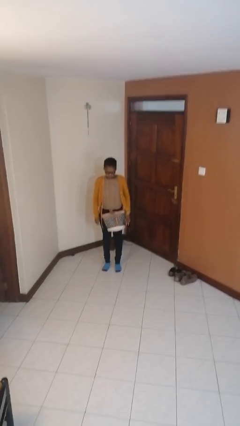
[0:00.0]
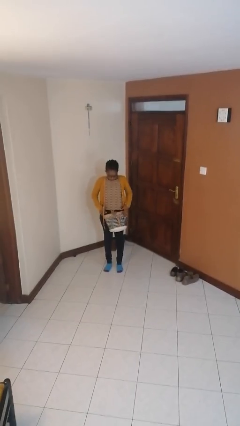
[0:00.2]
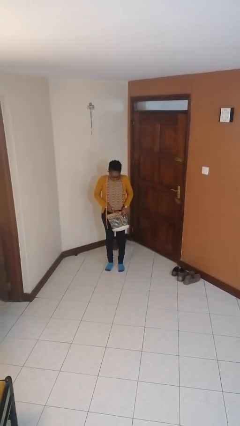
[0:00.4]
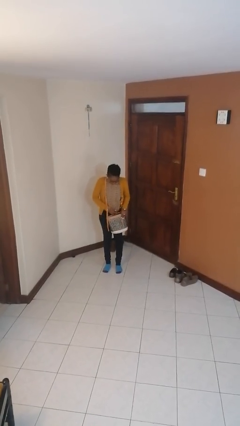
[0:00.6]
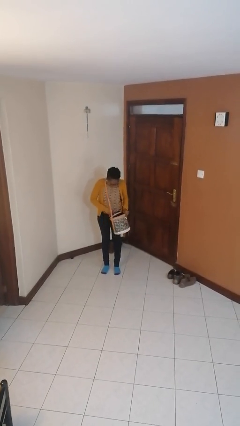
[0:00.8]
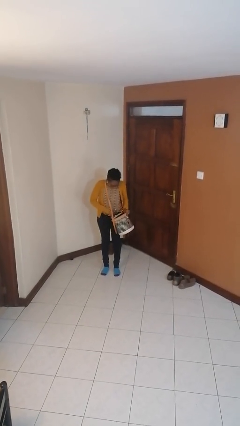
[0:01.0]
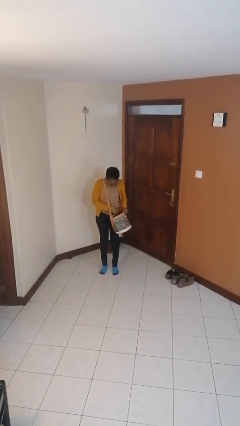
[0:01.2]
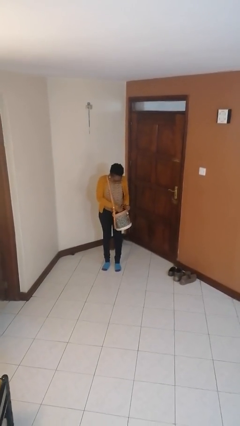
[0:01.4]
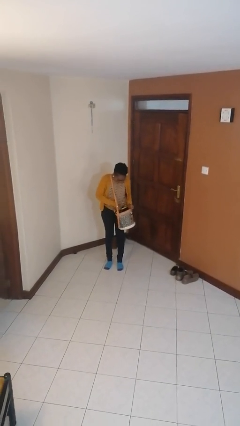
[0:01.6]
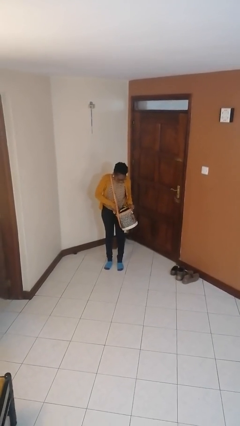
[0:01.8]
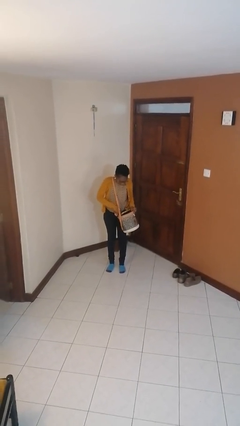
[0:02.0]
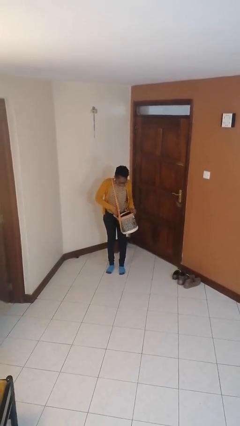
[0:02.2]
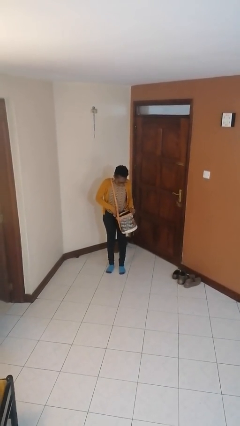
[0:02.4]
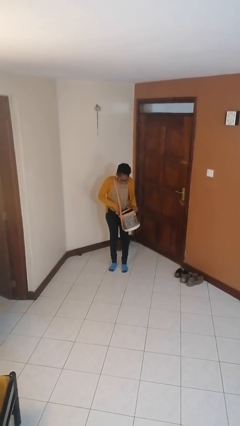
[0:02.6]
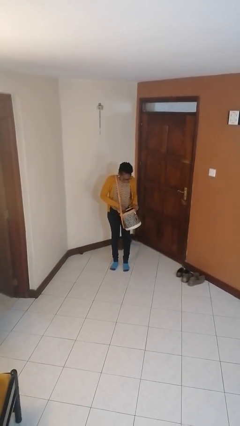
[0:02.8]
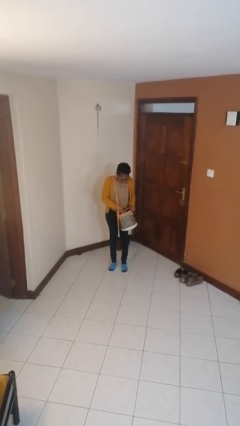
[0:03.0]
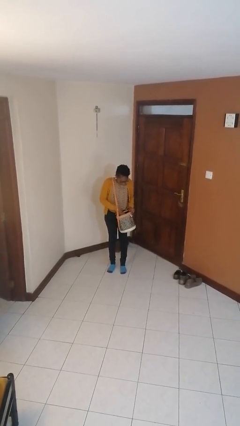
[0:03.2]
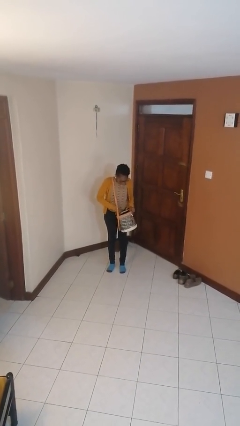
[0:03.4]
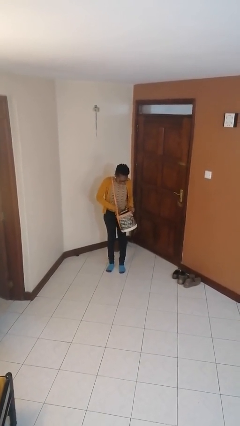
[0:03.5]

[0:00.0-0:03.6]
person searches in purse

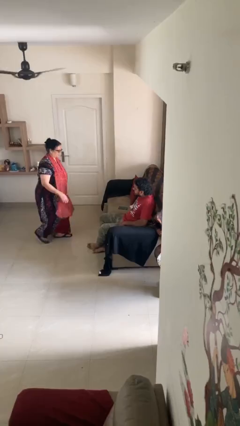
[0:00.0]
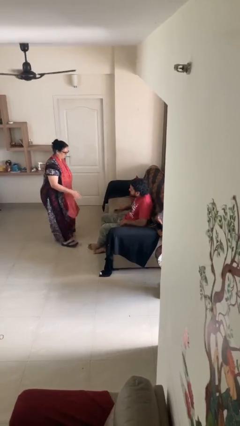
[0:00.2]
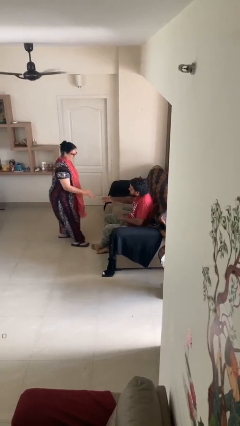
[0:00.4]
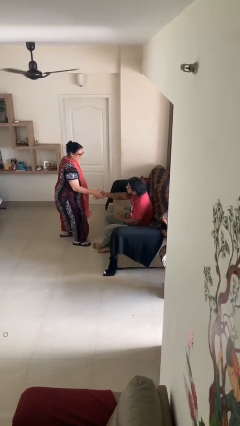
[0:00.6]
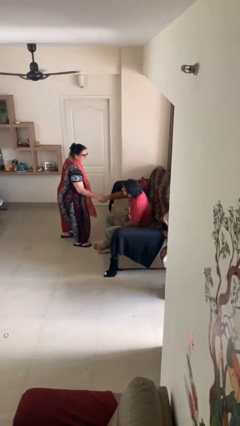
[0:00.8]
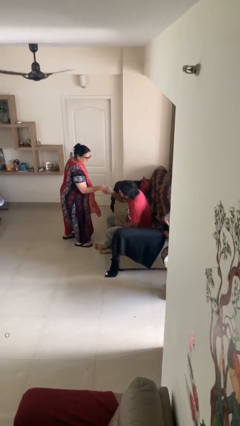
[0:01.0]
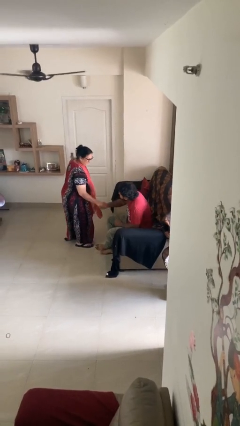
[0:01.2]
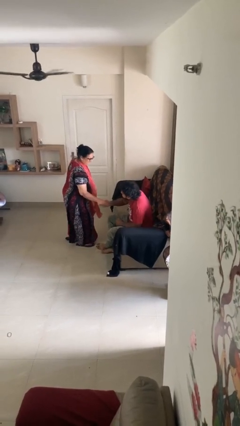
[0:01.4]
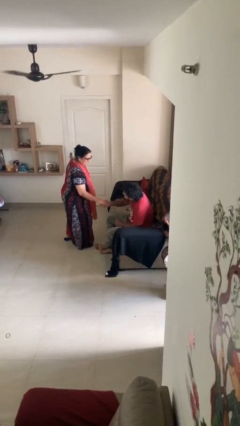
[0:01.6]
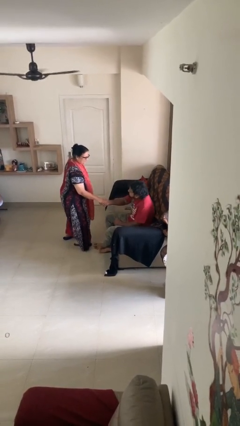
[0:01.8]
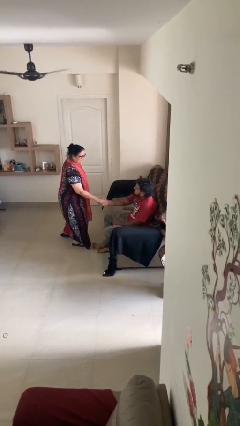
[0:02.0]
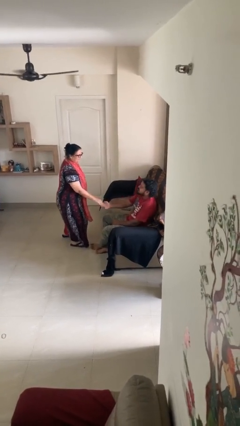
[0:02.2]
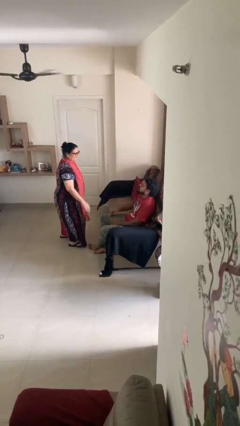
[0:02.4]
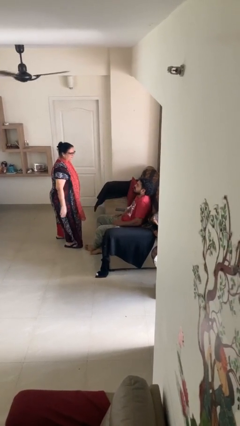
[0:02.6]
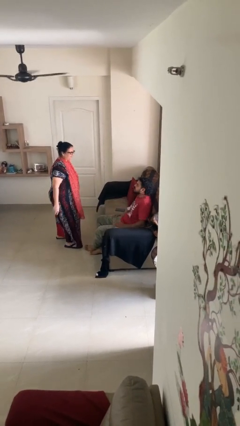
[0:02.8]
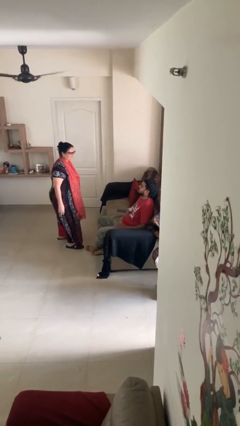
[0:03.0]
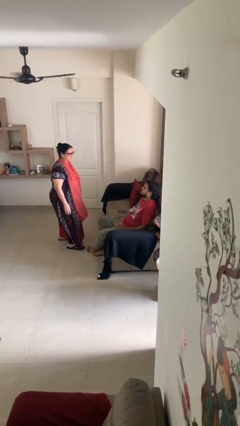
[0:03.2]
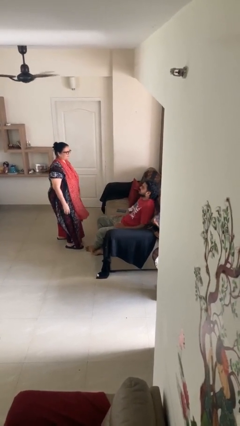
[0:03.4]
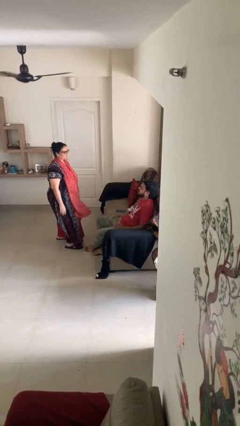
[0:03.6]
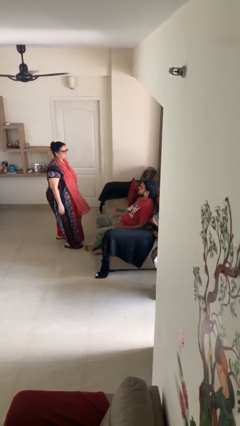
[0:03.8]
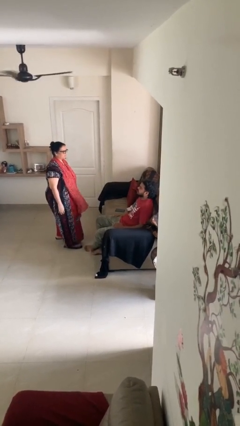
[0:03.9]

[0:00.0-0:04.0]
person shakes hand

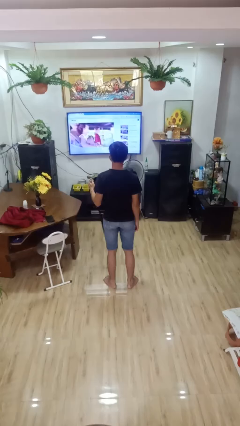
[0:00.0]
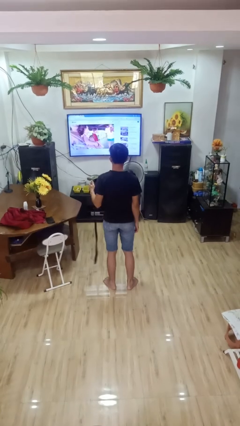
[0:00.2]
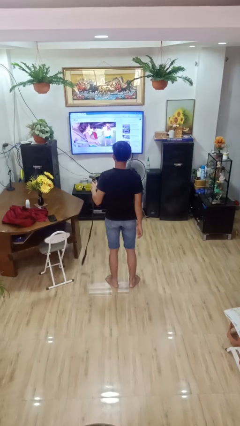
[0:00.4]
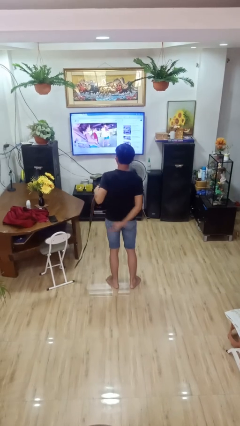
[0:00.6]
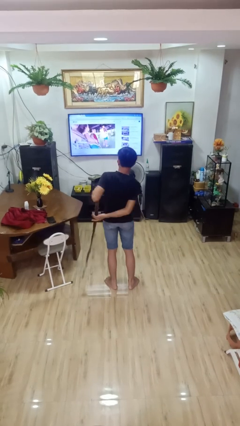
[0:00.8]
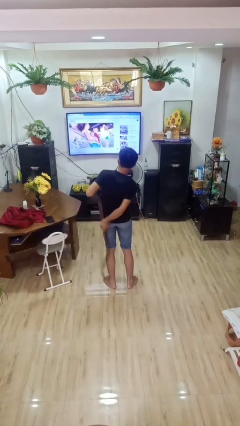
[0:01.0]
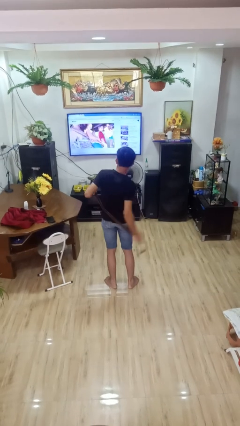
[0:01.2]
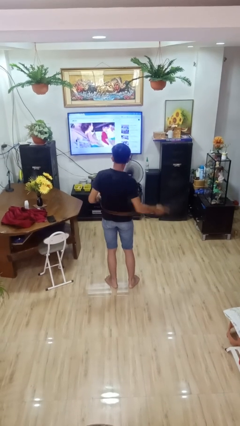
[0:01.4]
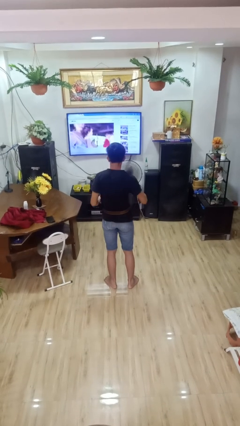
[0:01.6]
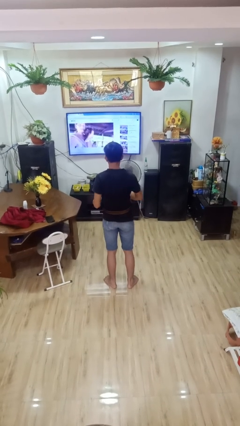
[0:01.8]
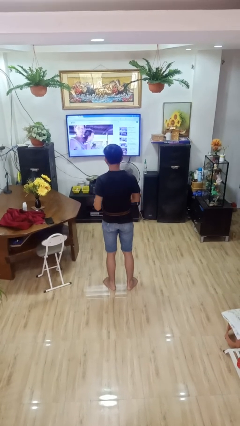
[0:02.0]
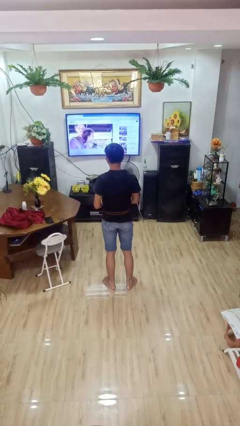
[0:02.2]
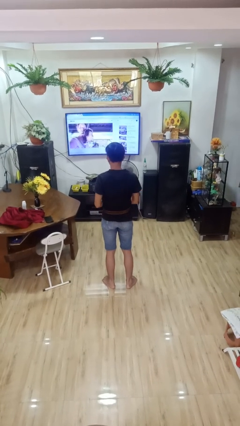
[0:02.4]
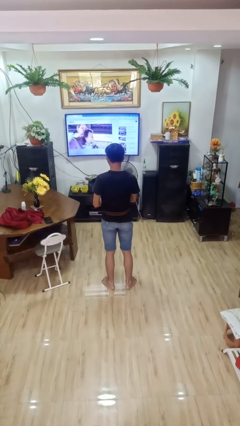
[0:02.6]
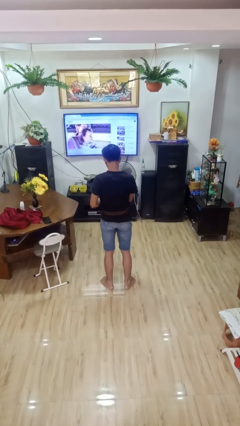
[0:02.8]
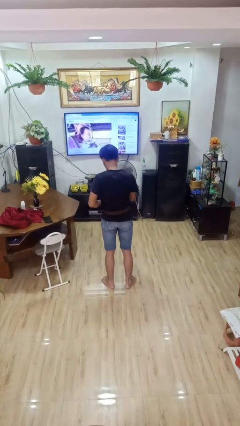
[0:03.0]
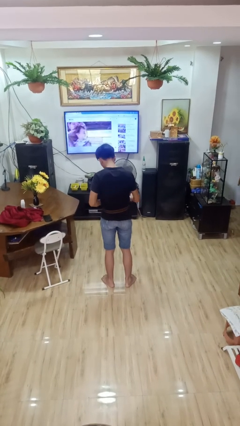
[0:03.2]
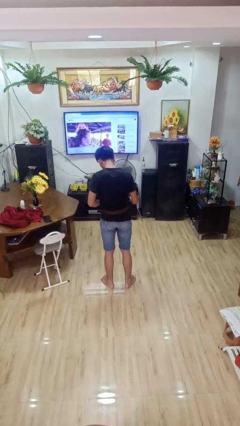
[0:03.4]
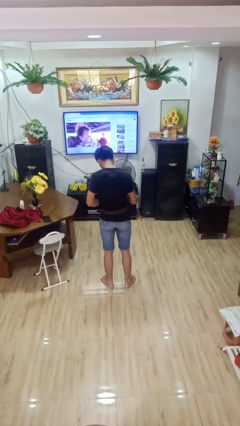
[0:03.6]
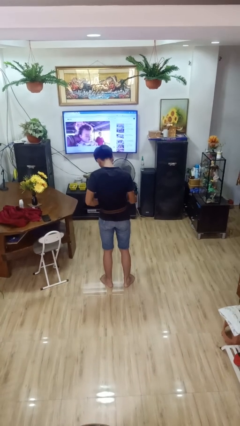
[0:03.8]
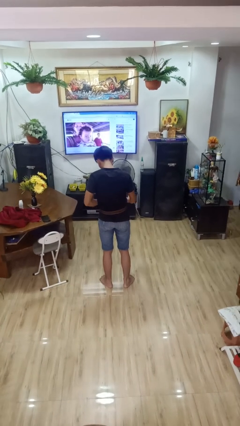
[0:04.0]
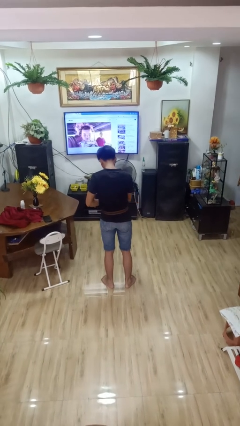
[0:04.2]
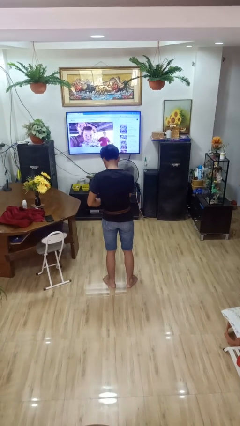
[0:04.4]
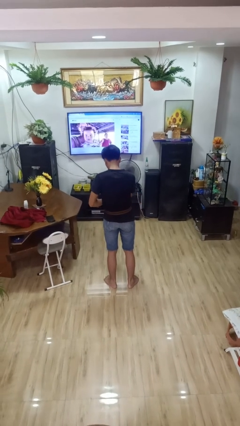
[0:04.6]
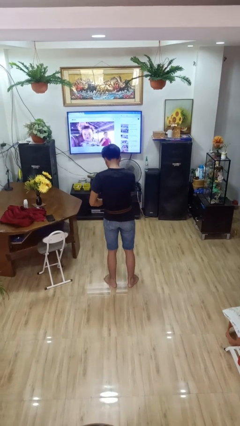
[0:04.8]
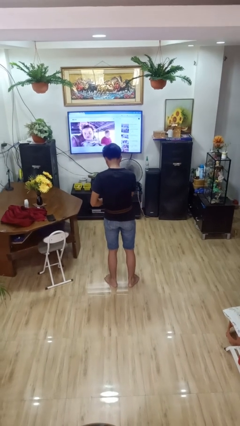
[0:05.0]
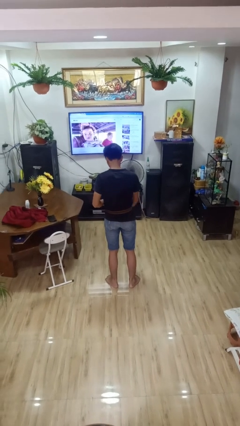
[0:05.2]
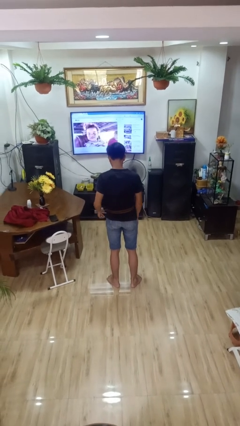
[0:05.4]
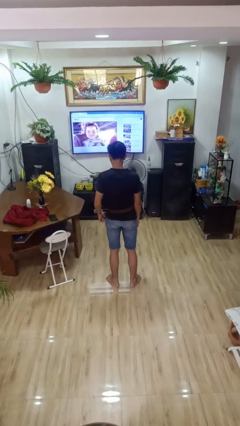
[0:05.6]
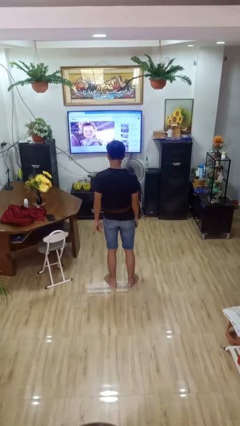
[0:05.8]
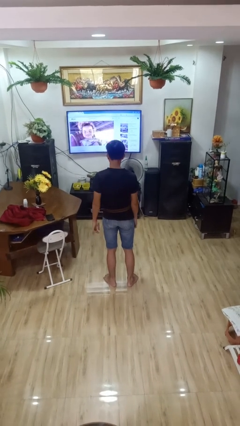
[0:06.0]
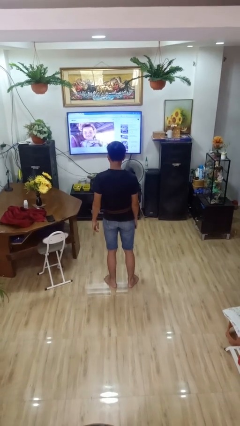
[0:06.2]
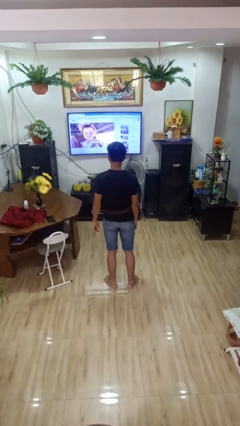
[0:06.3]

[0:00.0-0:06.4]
person puts on belt

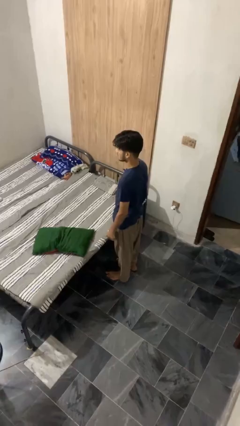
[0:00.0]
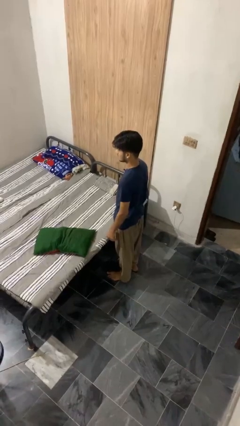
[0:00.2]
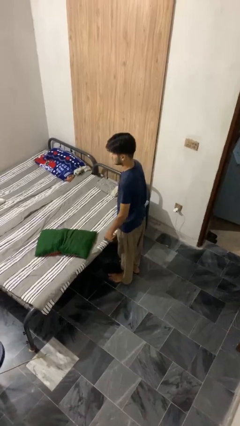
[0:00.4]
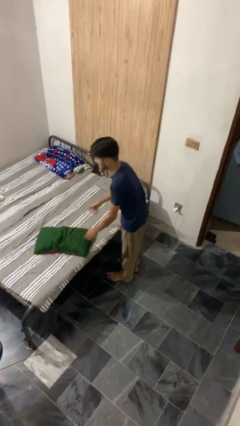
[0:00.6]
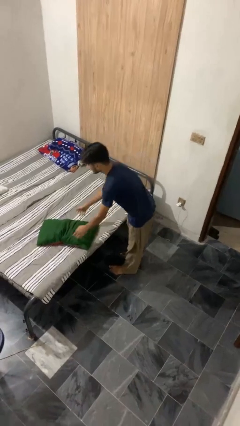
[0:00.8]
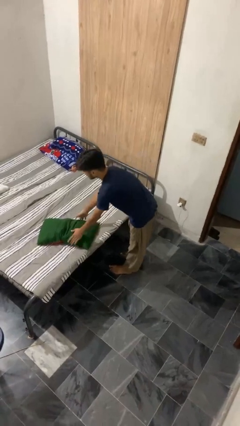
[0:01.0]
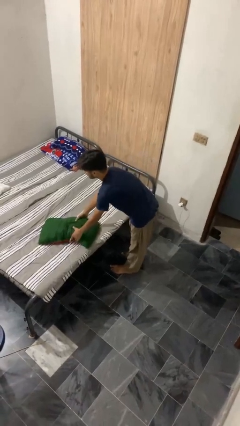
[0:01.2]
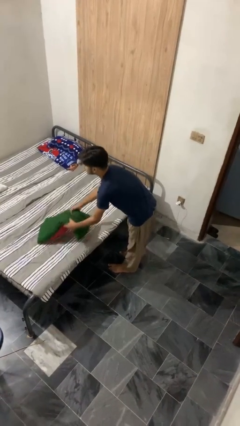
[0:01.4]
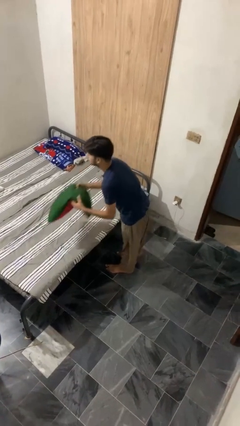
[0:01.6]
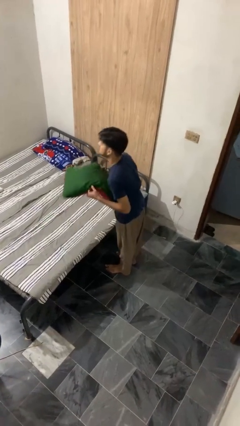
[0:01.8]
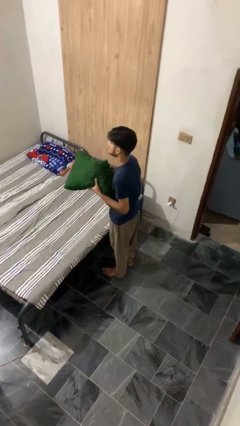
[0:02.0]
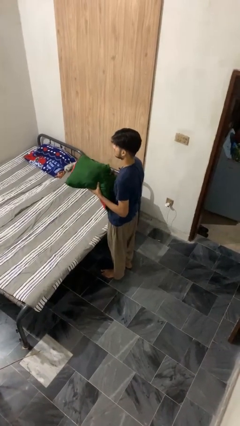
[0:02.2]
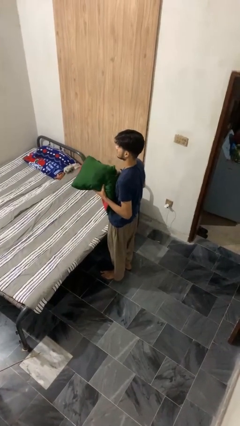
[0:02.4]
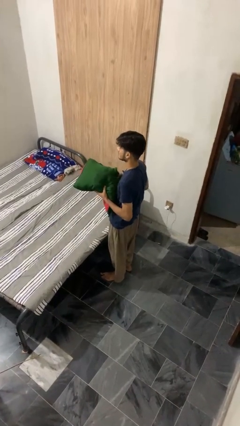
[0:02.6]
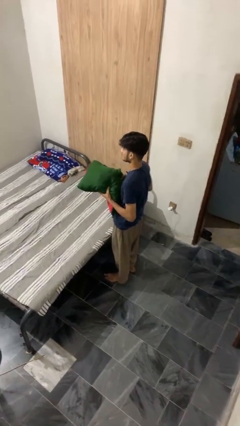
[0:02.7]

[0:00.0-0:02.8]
person picks up object from bed

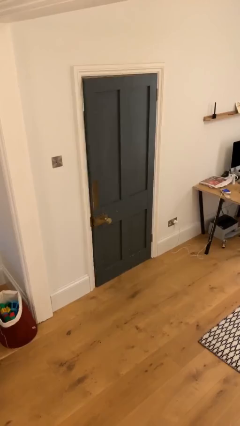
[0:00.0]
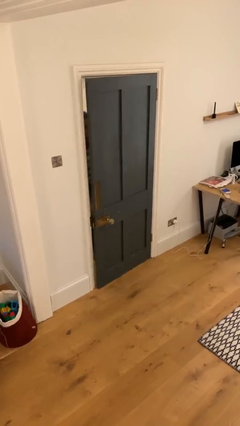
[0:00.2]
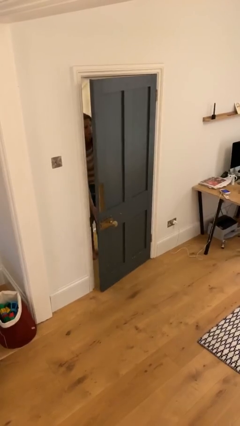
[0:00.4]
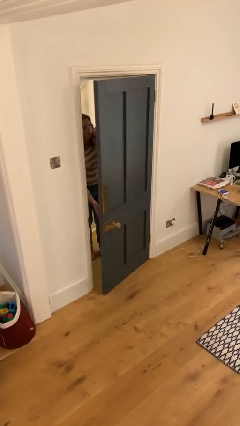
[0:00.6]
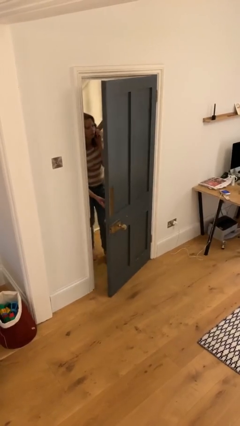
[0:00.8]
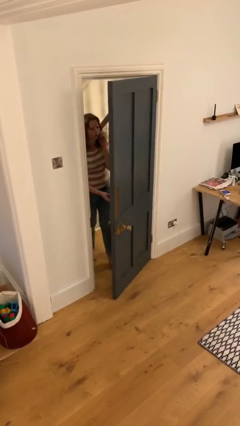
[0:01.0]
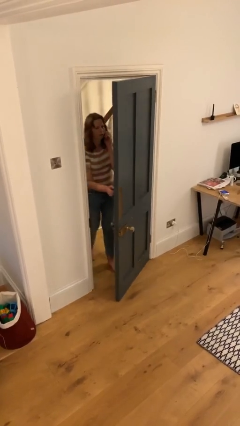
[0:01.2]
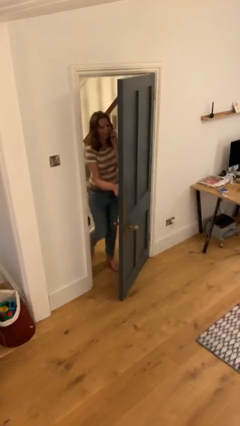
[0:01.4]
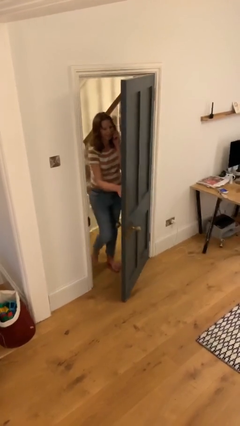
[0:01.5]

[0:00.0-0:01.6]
person opens facility door
